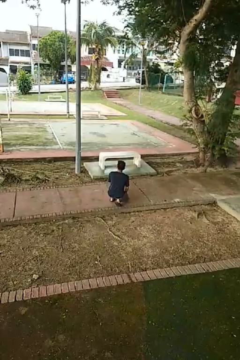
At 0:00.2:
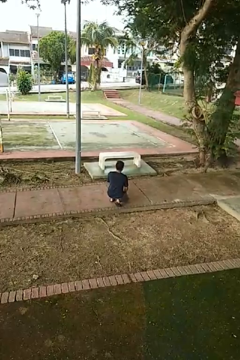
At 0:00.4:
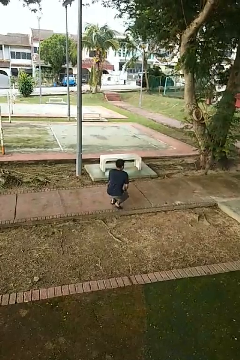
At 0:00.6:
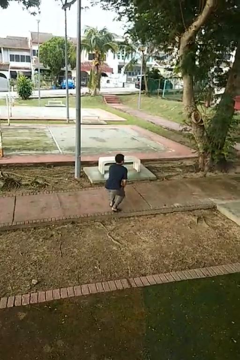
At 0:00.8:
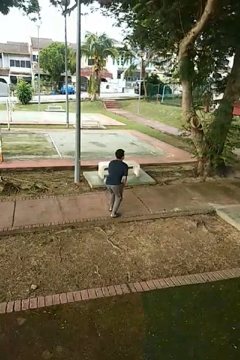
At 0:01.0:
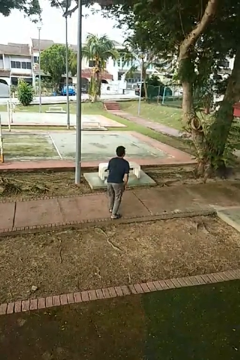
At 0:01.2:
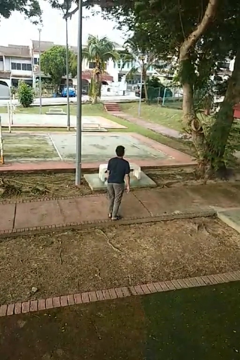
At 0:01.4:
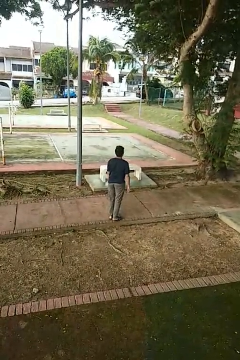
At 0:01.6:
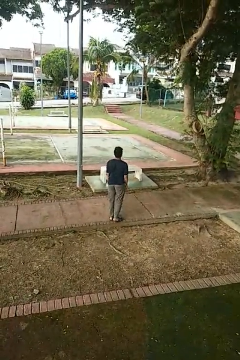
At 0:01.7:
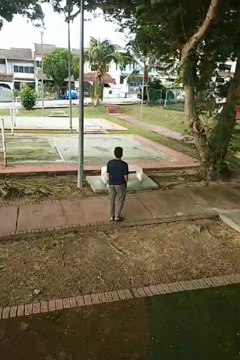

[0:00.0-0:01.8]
person stands up from floor

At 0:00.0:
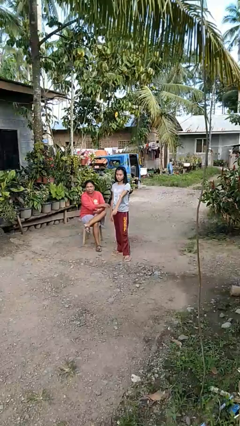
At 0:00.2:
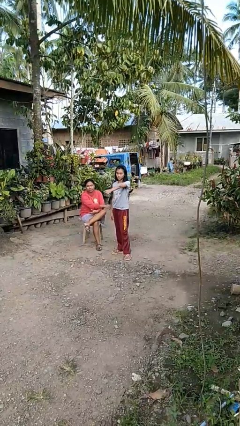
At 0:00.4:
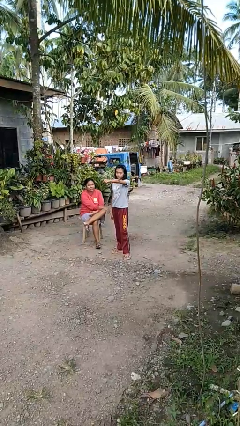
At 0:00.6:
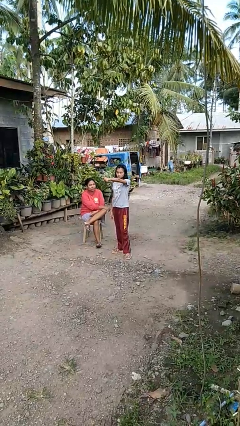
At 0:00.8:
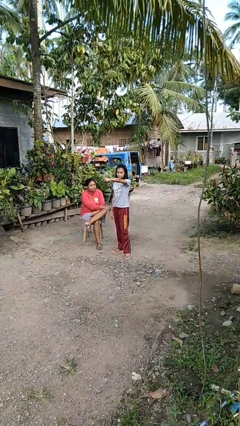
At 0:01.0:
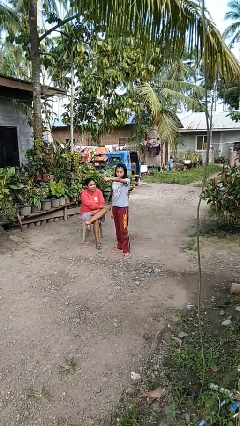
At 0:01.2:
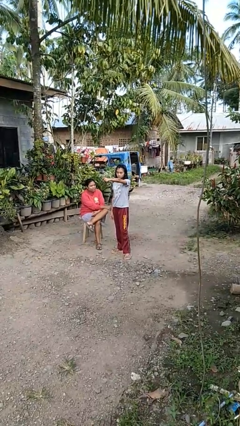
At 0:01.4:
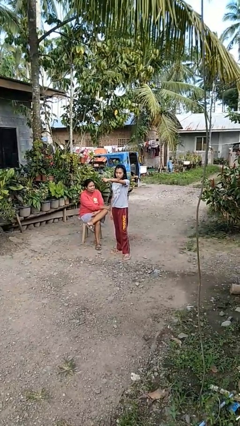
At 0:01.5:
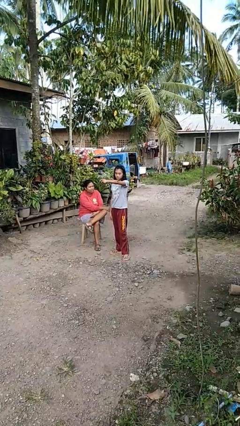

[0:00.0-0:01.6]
person points at person

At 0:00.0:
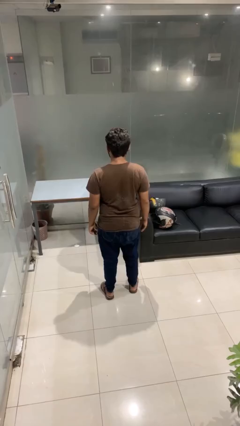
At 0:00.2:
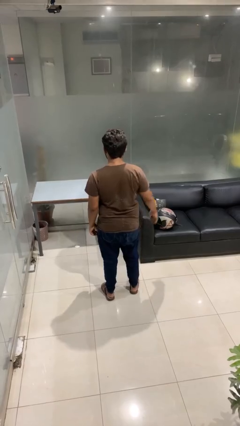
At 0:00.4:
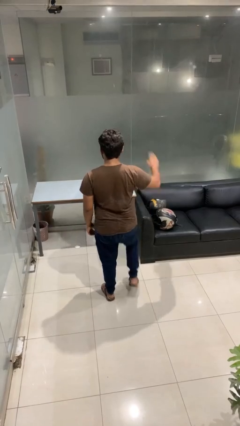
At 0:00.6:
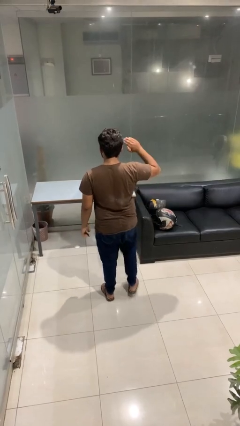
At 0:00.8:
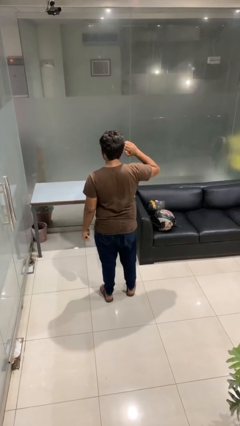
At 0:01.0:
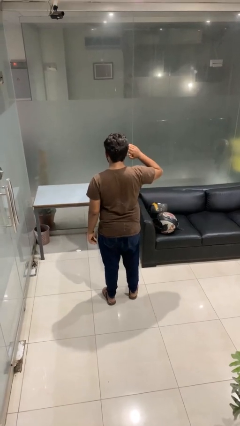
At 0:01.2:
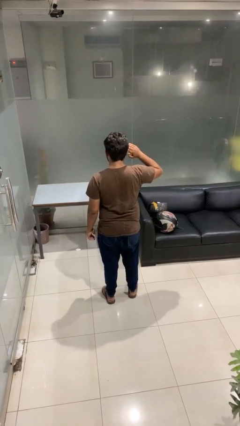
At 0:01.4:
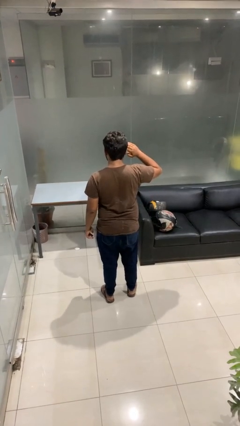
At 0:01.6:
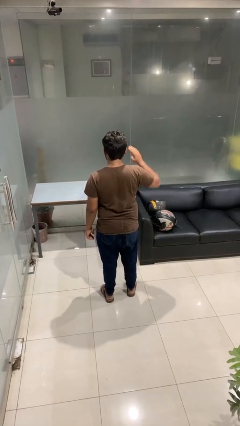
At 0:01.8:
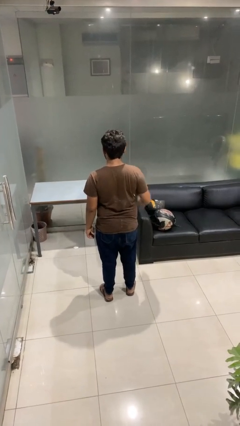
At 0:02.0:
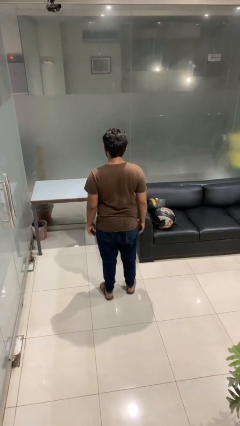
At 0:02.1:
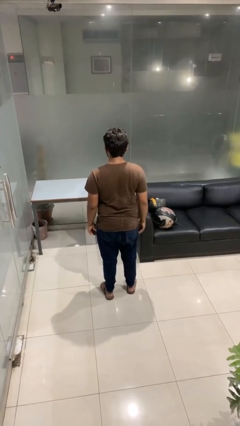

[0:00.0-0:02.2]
person salutes

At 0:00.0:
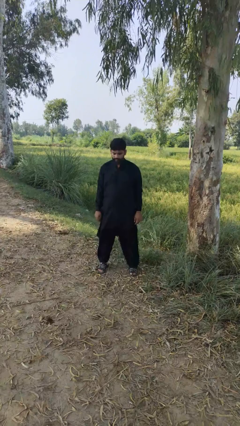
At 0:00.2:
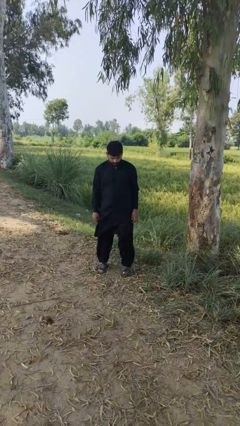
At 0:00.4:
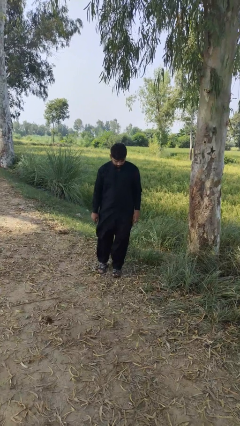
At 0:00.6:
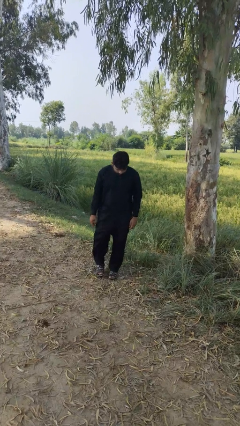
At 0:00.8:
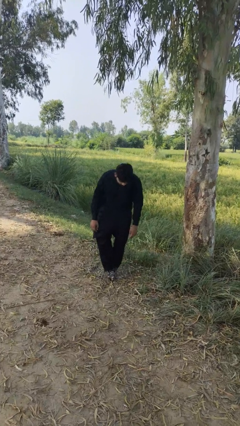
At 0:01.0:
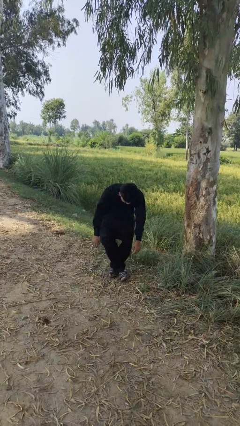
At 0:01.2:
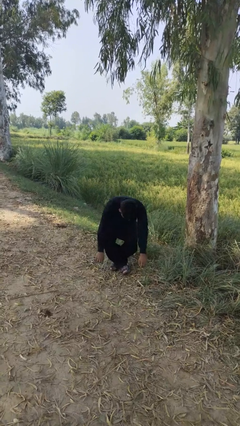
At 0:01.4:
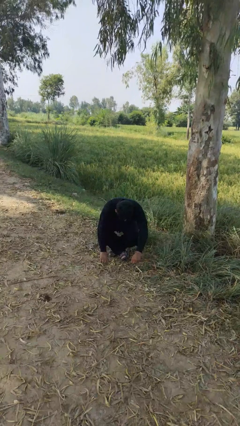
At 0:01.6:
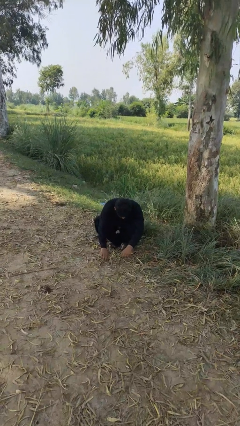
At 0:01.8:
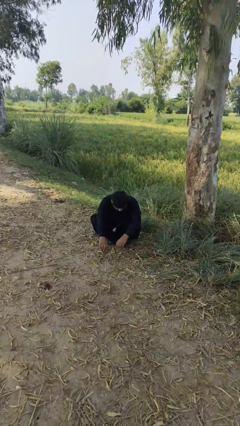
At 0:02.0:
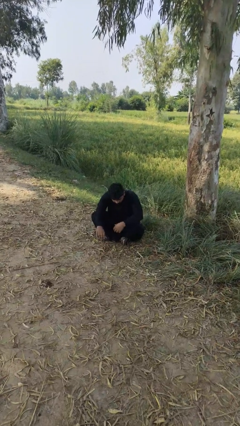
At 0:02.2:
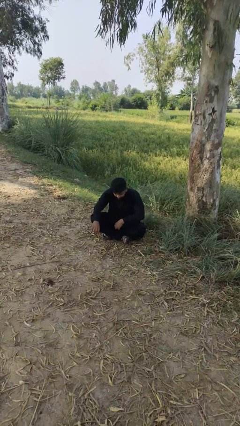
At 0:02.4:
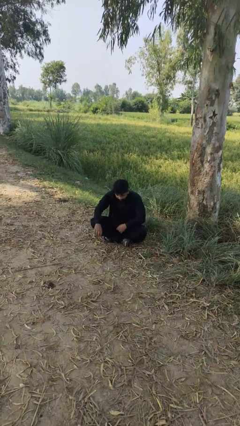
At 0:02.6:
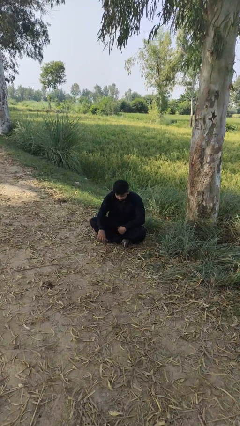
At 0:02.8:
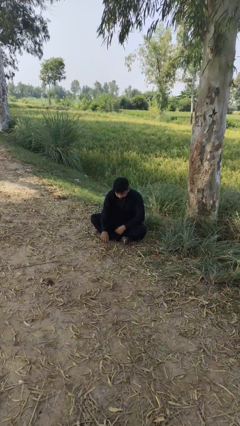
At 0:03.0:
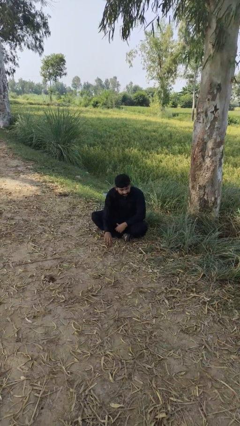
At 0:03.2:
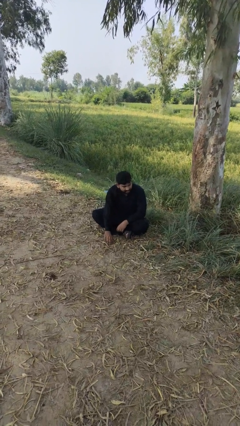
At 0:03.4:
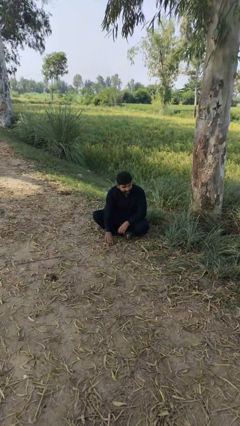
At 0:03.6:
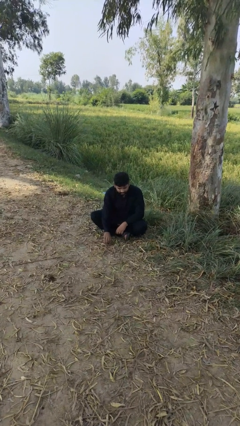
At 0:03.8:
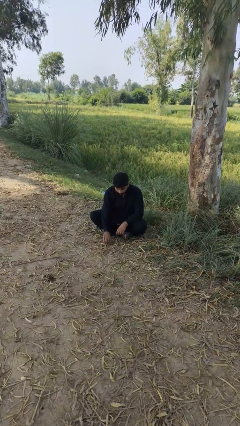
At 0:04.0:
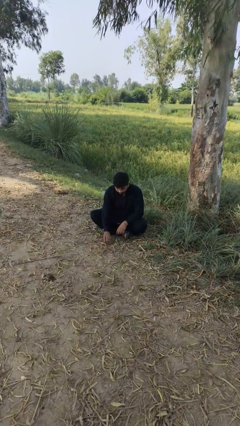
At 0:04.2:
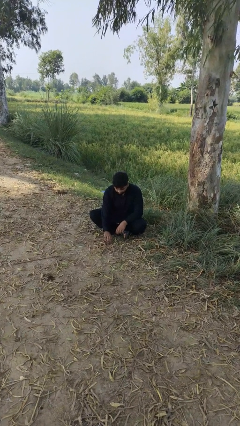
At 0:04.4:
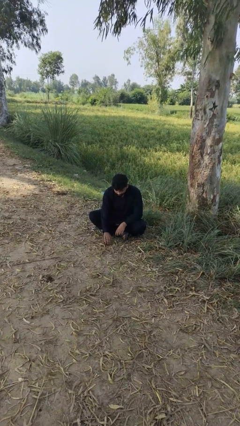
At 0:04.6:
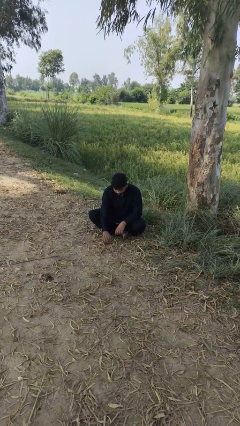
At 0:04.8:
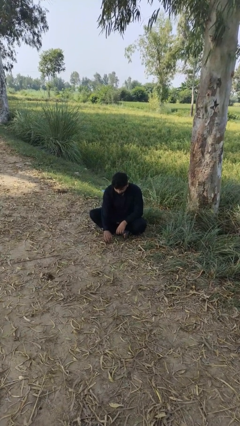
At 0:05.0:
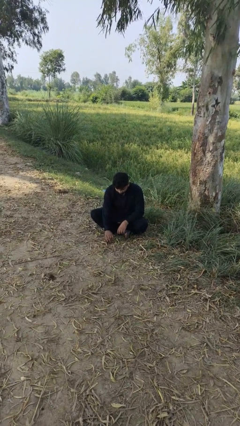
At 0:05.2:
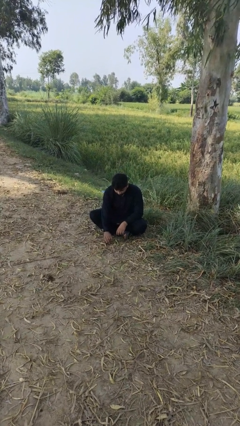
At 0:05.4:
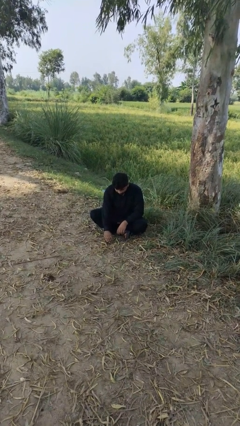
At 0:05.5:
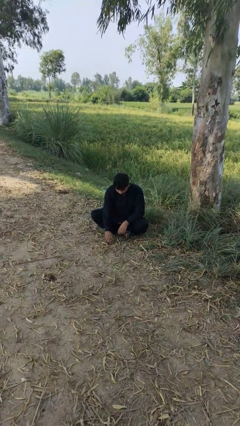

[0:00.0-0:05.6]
person sits crisscross

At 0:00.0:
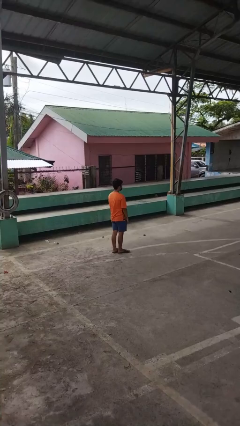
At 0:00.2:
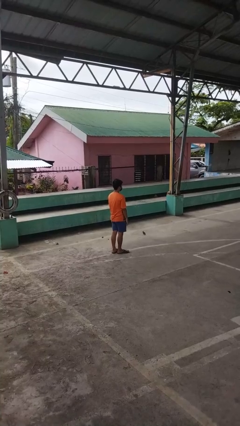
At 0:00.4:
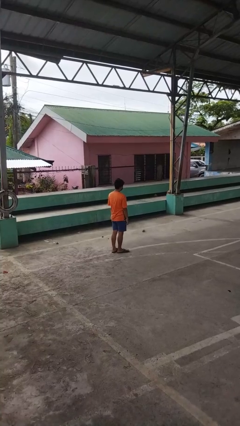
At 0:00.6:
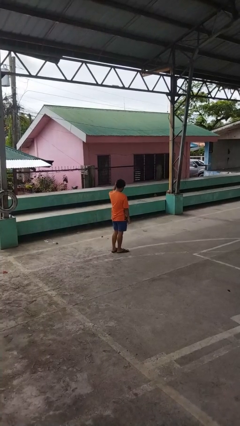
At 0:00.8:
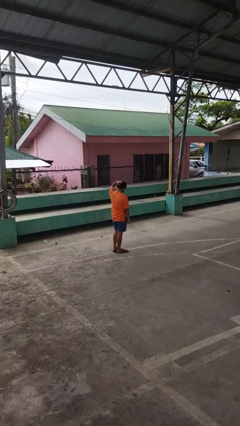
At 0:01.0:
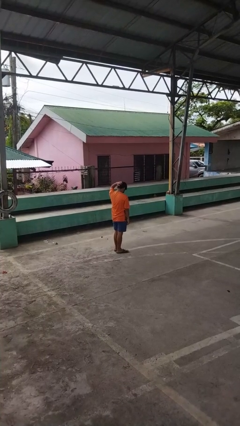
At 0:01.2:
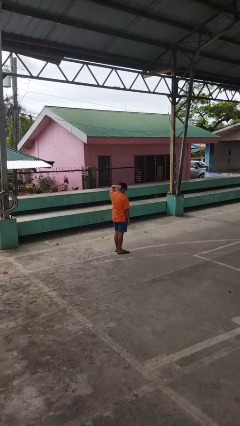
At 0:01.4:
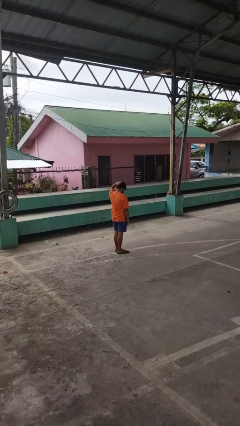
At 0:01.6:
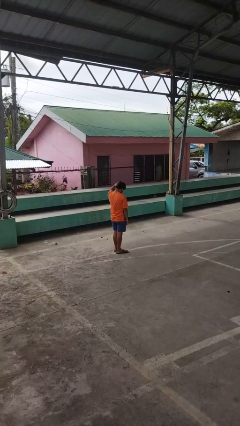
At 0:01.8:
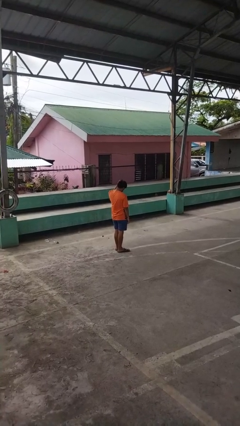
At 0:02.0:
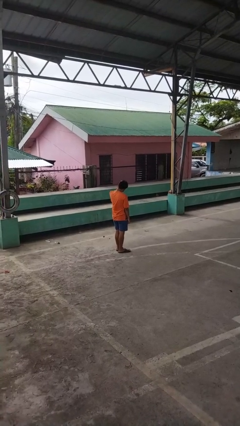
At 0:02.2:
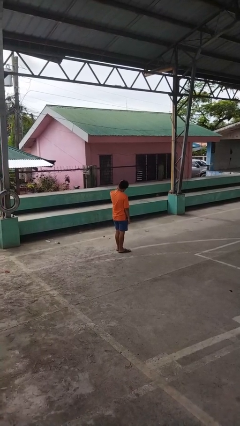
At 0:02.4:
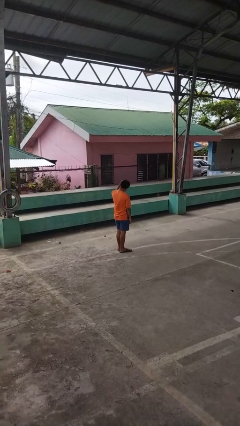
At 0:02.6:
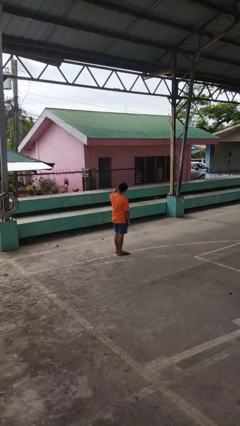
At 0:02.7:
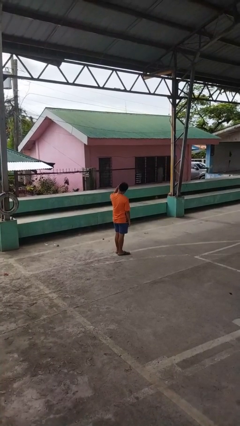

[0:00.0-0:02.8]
person scratches face

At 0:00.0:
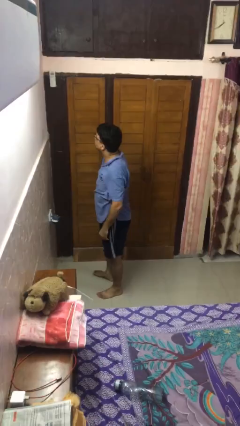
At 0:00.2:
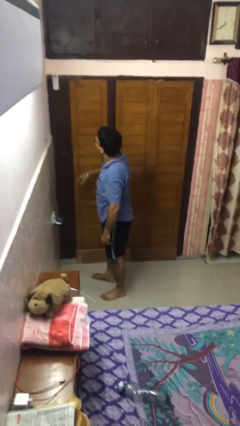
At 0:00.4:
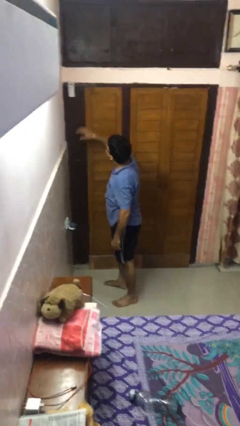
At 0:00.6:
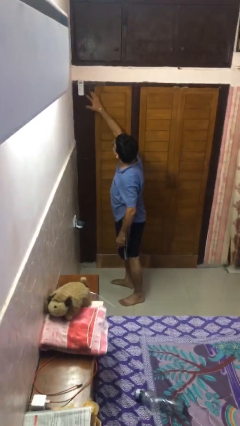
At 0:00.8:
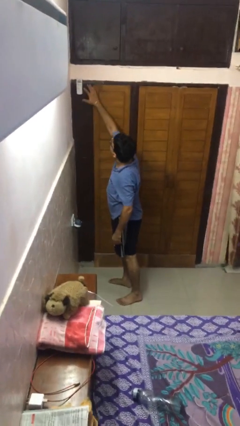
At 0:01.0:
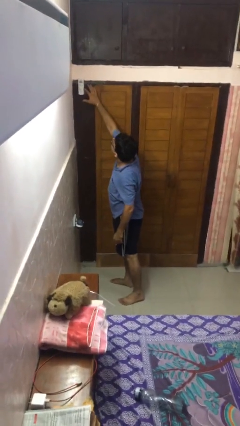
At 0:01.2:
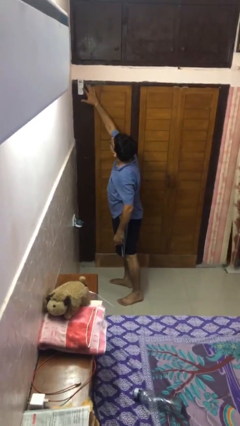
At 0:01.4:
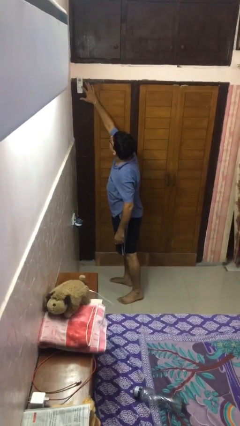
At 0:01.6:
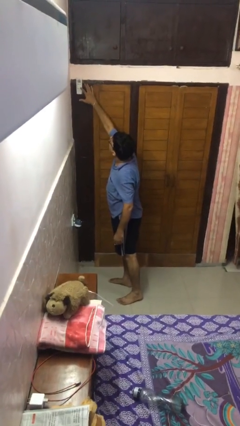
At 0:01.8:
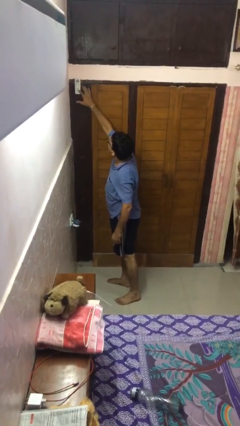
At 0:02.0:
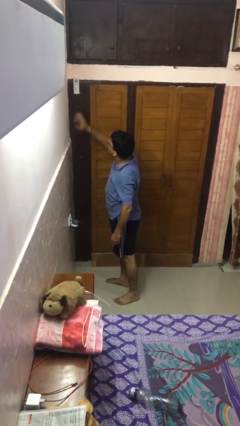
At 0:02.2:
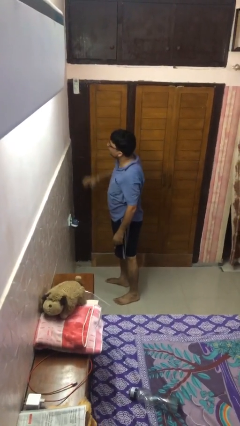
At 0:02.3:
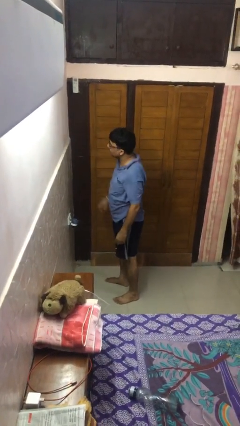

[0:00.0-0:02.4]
person adjusts thermostat

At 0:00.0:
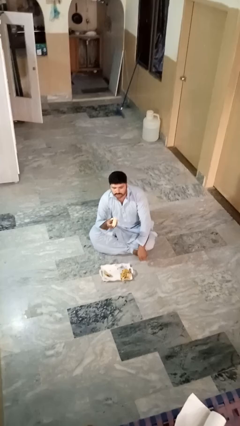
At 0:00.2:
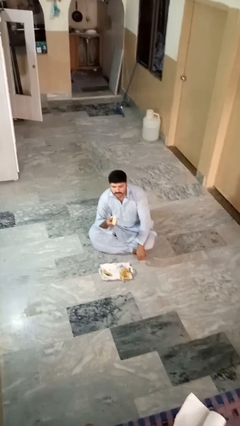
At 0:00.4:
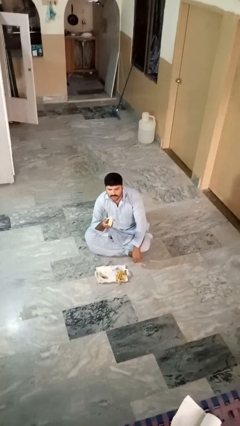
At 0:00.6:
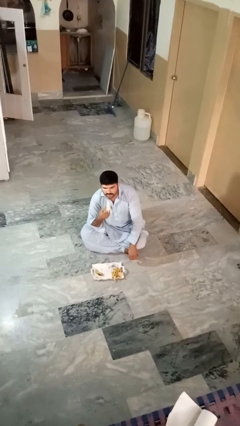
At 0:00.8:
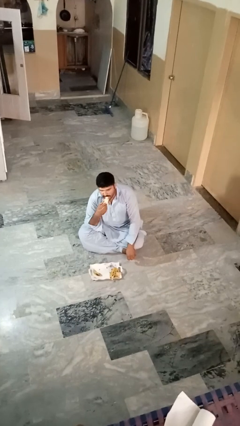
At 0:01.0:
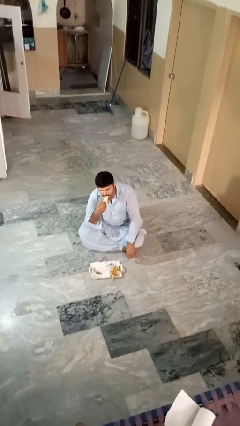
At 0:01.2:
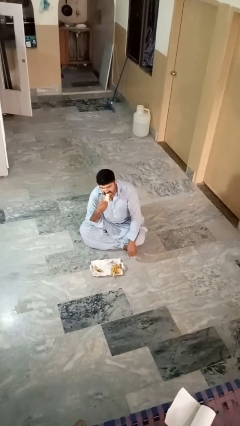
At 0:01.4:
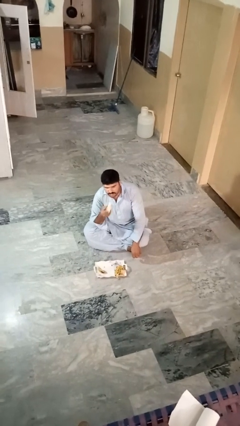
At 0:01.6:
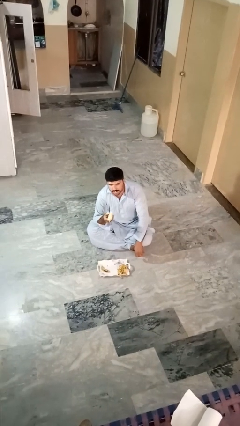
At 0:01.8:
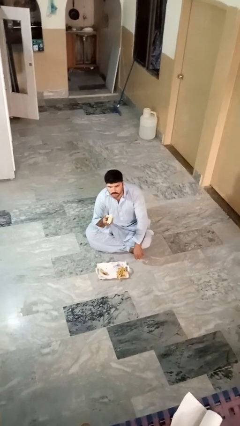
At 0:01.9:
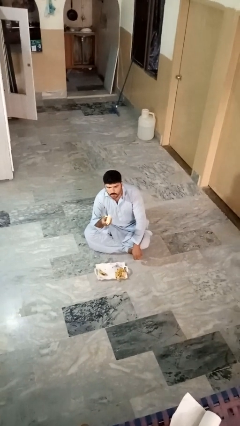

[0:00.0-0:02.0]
person eats banana
